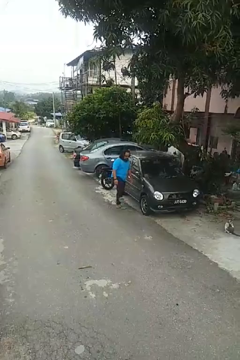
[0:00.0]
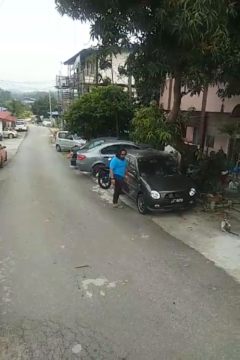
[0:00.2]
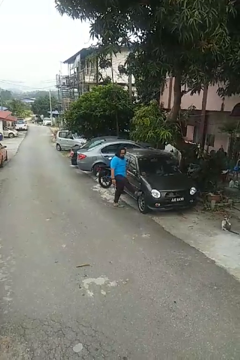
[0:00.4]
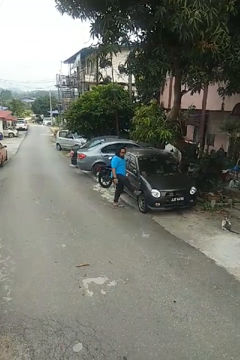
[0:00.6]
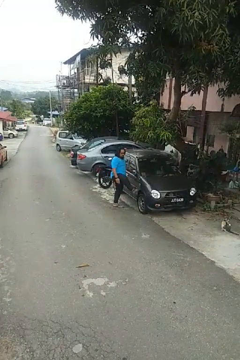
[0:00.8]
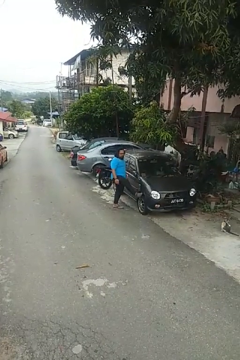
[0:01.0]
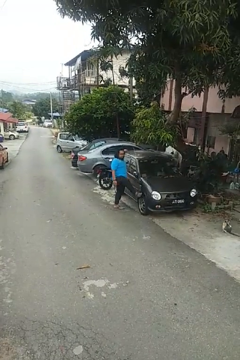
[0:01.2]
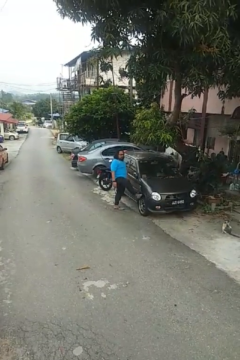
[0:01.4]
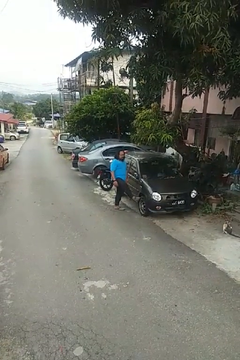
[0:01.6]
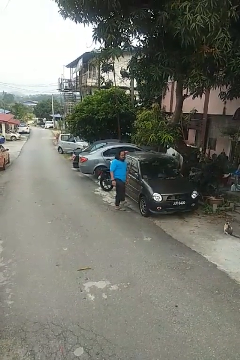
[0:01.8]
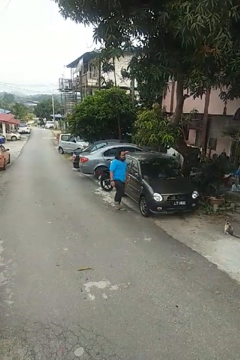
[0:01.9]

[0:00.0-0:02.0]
person kicks car tires

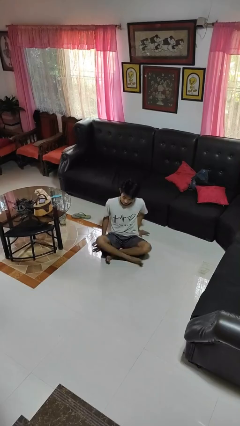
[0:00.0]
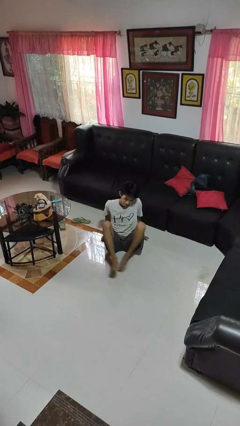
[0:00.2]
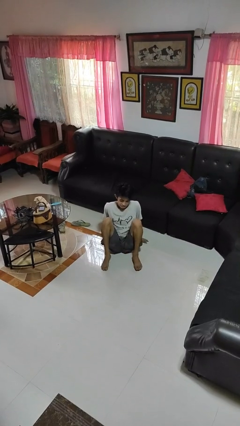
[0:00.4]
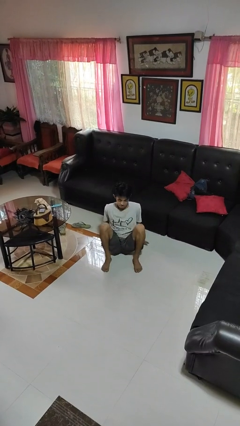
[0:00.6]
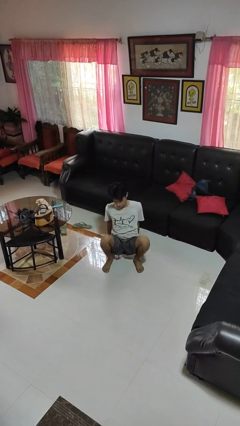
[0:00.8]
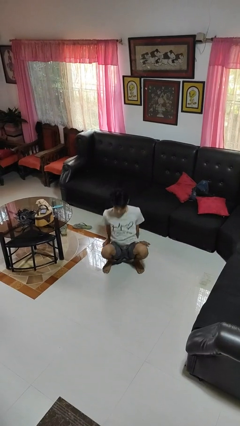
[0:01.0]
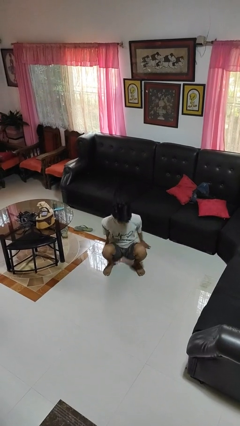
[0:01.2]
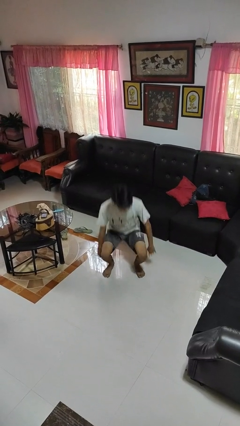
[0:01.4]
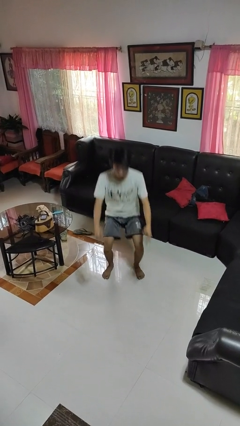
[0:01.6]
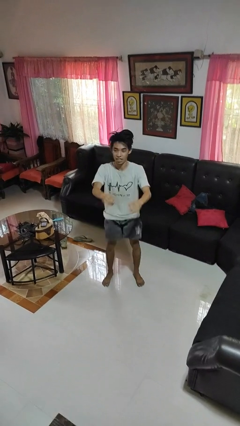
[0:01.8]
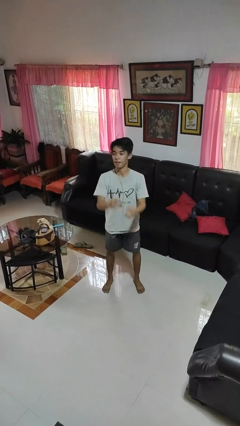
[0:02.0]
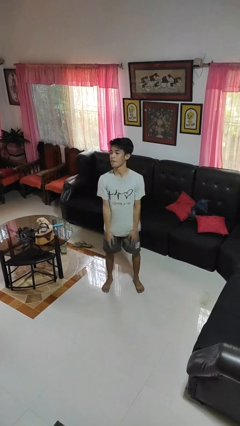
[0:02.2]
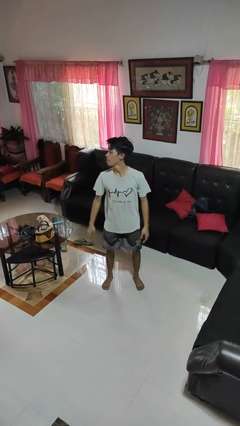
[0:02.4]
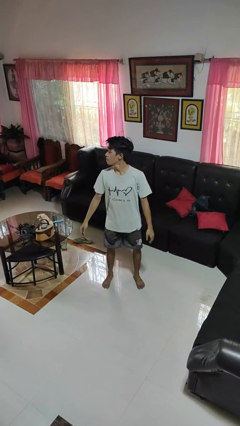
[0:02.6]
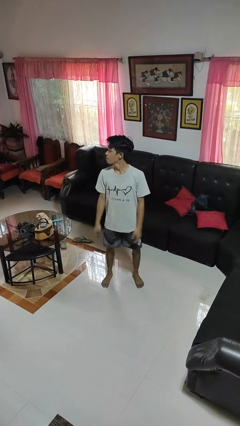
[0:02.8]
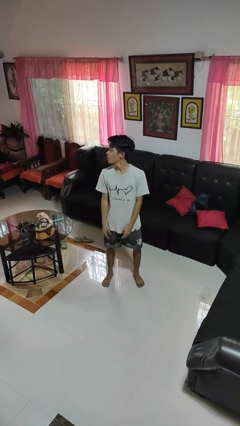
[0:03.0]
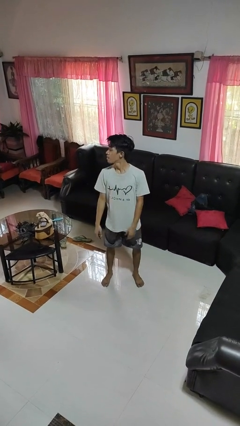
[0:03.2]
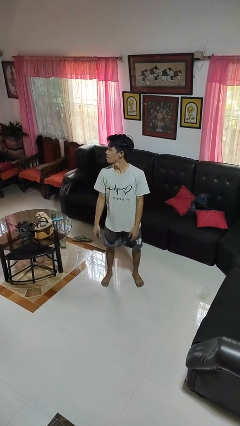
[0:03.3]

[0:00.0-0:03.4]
person stands up from floor

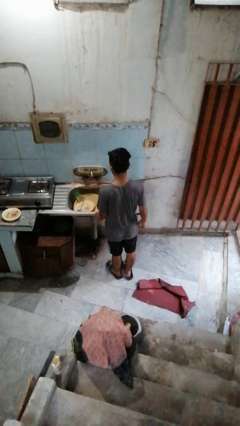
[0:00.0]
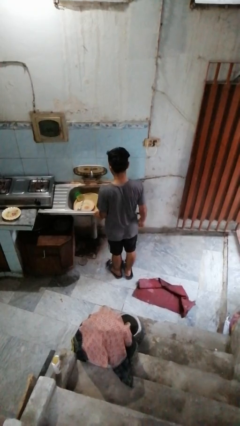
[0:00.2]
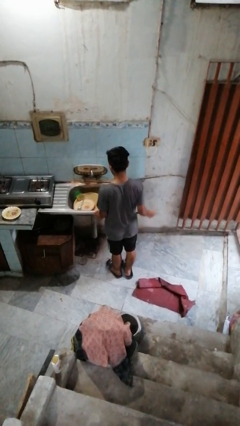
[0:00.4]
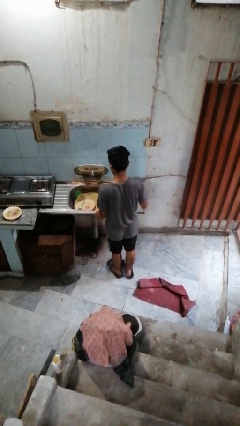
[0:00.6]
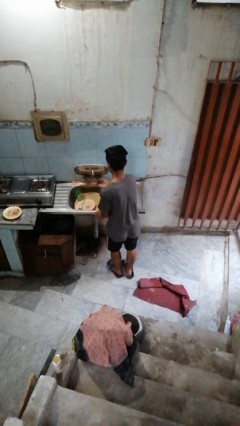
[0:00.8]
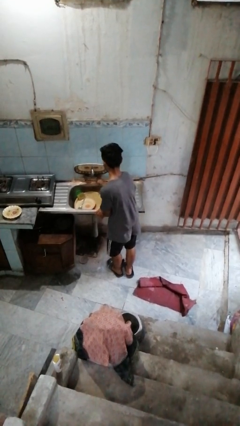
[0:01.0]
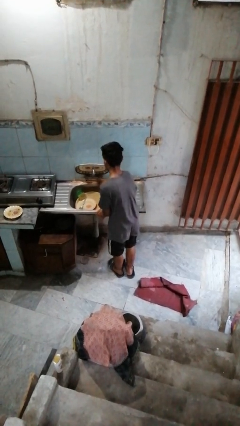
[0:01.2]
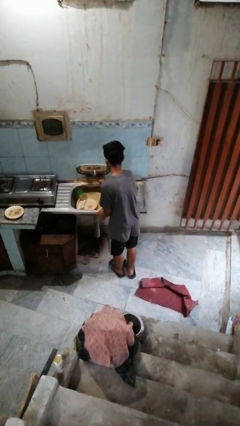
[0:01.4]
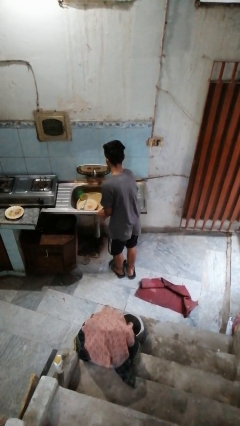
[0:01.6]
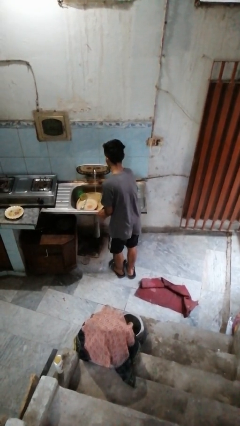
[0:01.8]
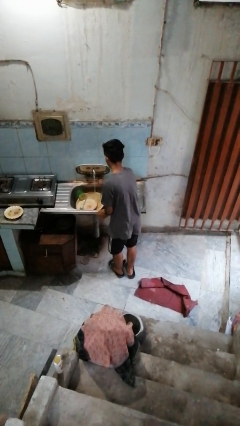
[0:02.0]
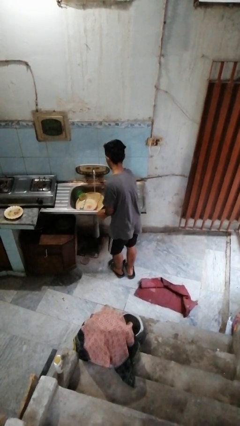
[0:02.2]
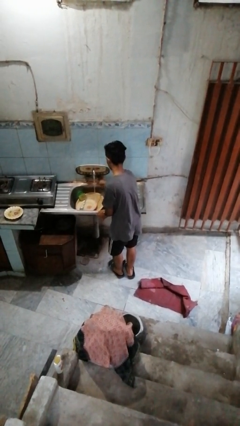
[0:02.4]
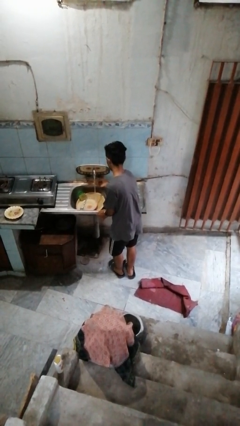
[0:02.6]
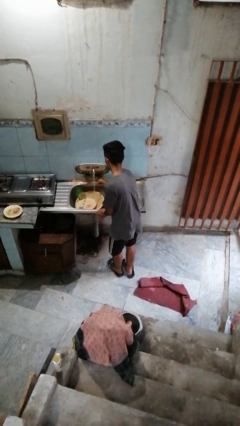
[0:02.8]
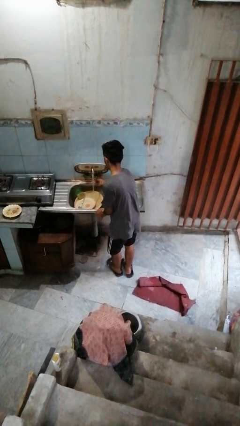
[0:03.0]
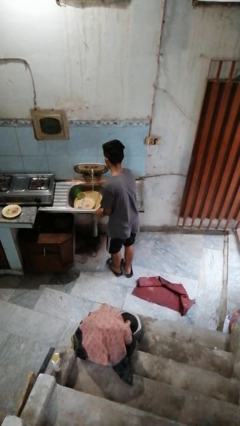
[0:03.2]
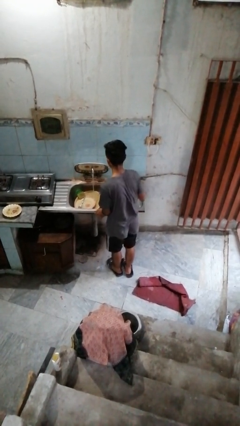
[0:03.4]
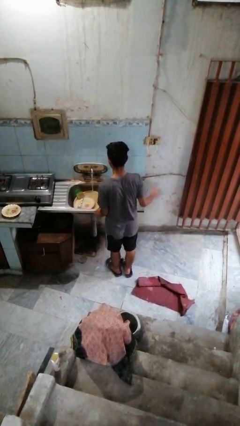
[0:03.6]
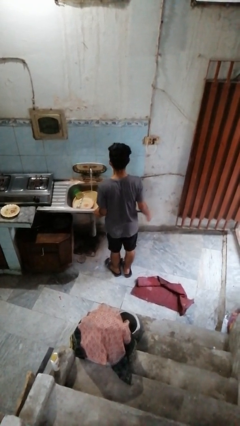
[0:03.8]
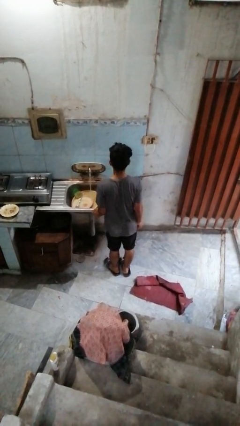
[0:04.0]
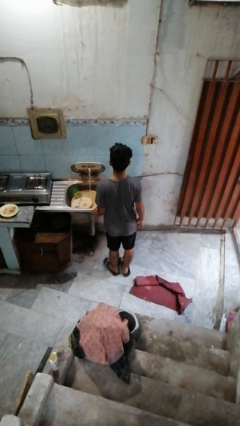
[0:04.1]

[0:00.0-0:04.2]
person turns on faucet

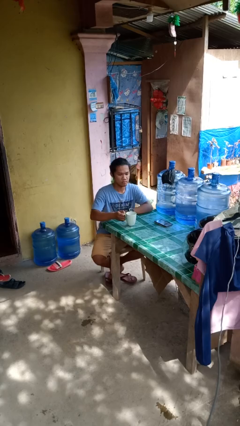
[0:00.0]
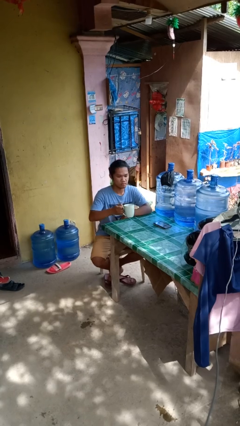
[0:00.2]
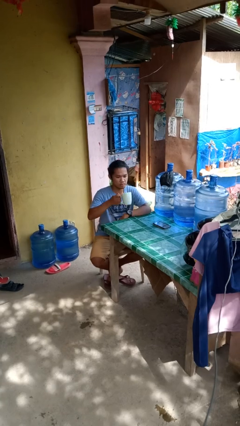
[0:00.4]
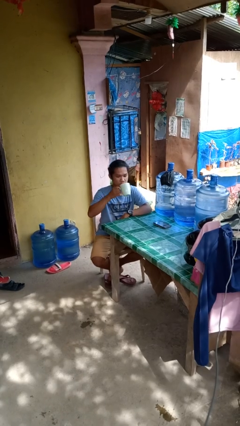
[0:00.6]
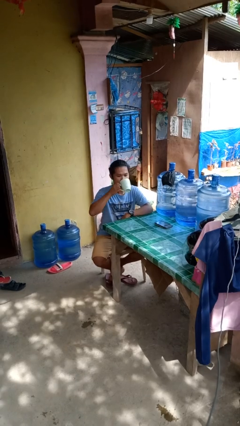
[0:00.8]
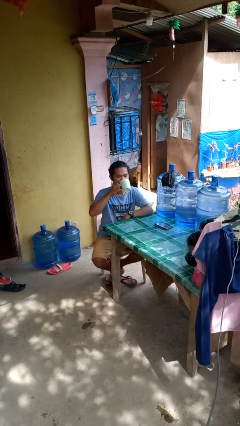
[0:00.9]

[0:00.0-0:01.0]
person picks up object from table

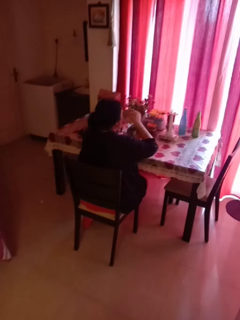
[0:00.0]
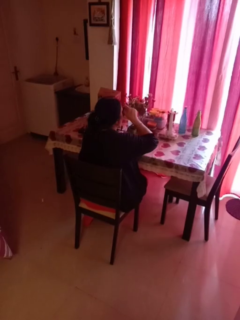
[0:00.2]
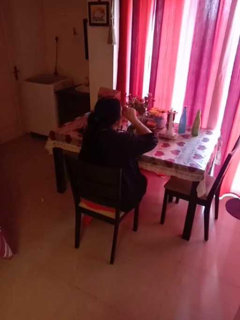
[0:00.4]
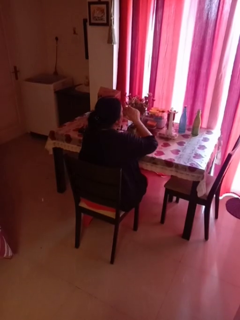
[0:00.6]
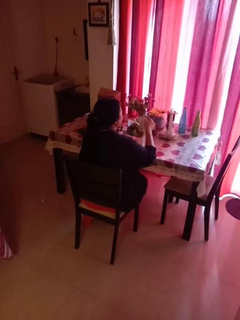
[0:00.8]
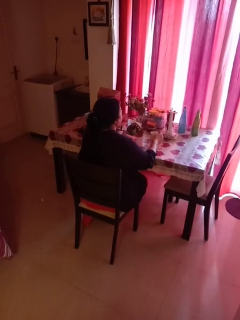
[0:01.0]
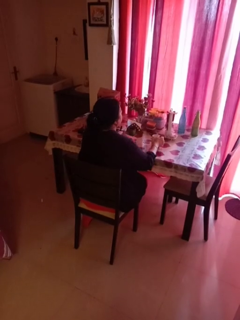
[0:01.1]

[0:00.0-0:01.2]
person drinks from mug

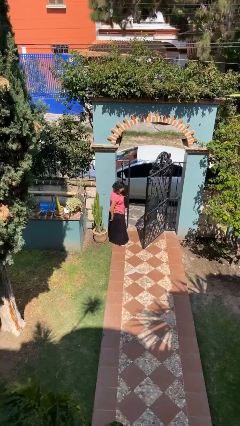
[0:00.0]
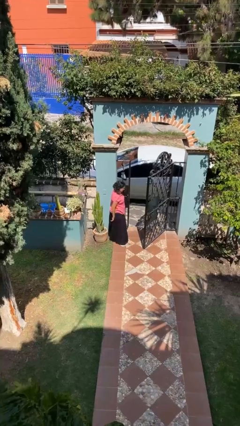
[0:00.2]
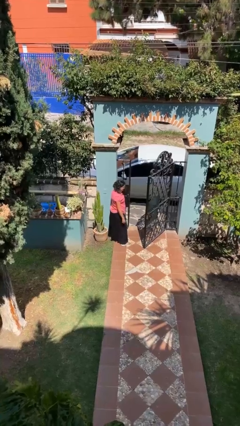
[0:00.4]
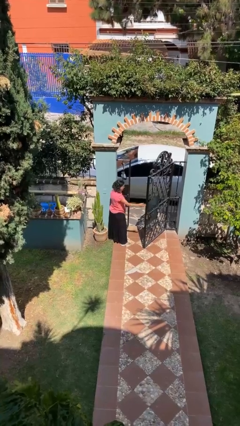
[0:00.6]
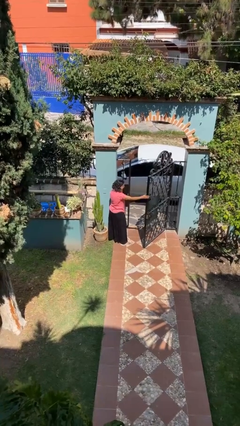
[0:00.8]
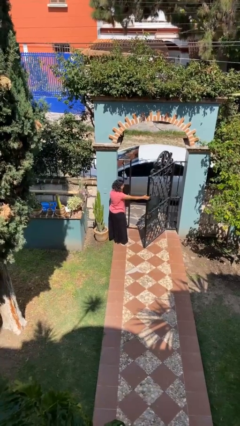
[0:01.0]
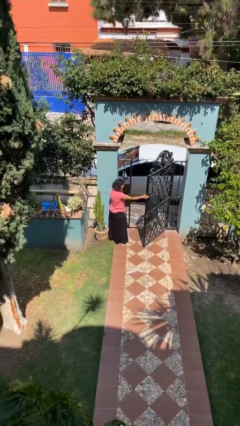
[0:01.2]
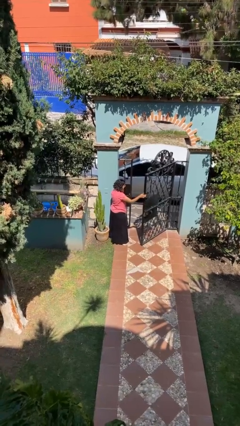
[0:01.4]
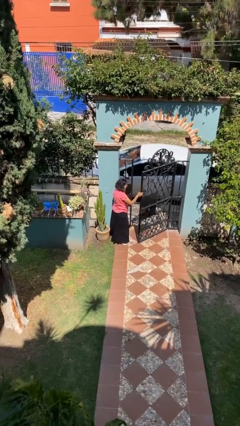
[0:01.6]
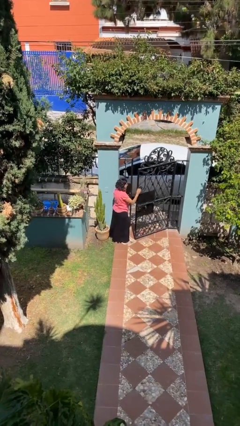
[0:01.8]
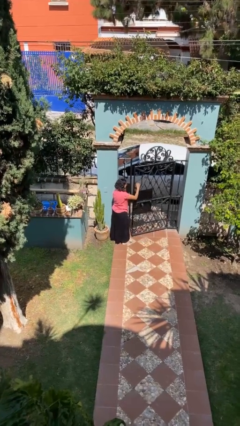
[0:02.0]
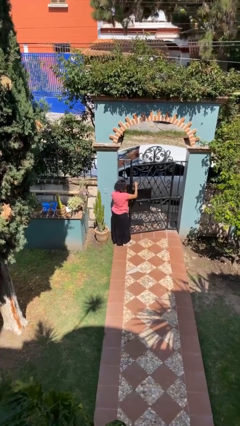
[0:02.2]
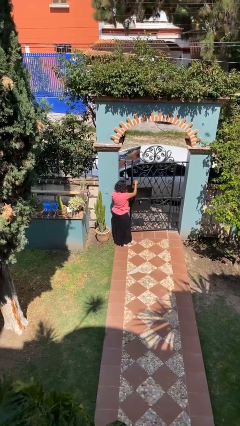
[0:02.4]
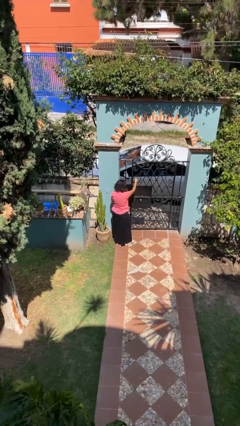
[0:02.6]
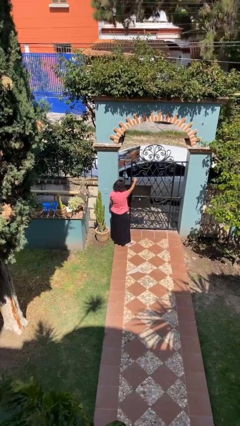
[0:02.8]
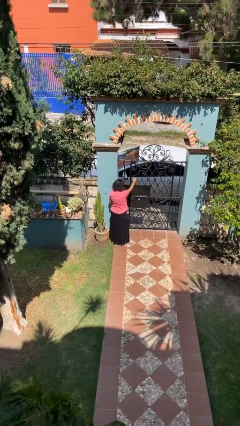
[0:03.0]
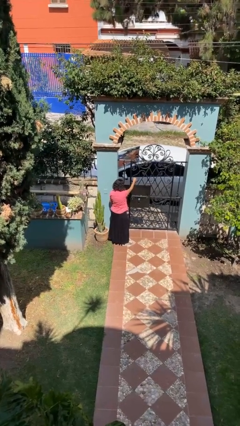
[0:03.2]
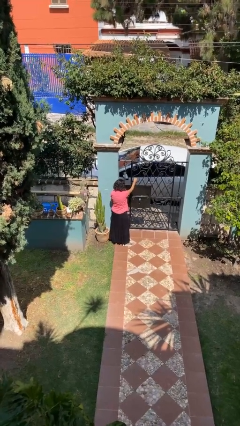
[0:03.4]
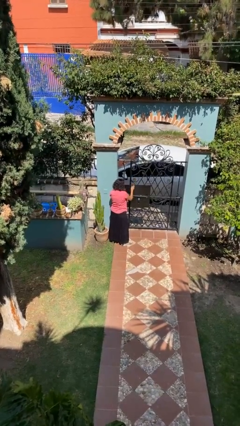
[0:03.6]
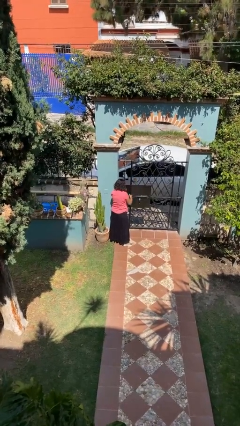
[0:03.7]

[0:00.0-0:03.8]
person closes facility door

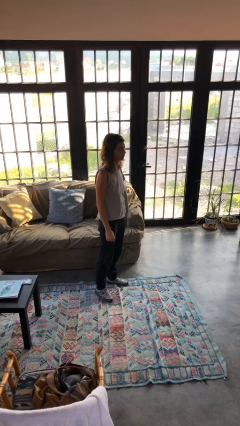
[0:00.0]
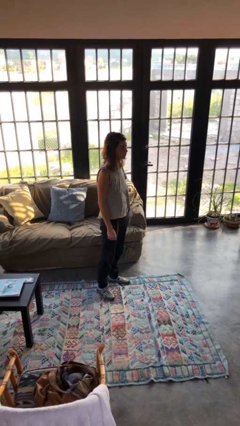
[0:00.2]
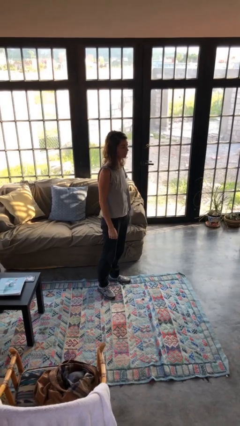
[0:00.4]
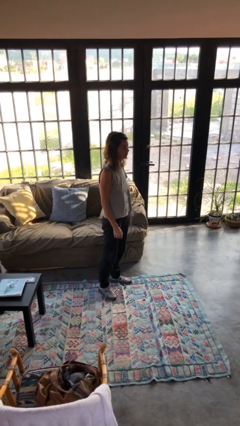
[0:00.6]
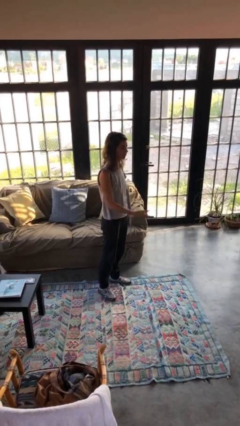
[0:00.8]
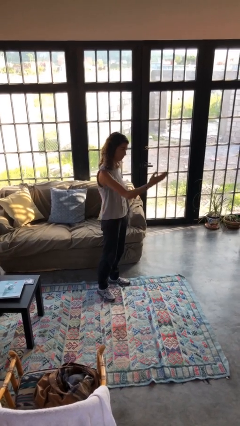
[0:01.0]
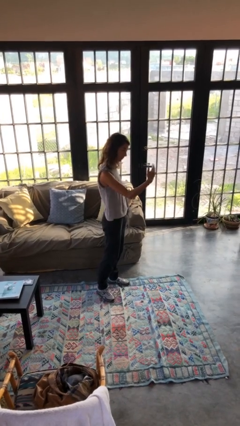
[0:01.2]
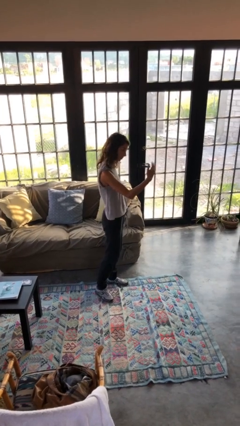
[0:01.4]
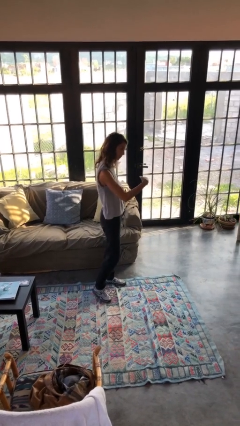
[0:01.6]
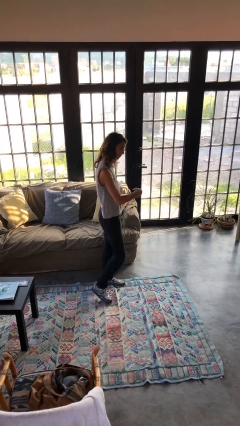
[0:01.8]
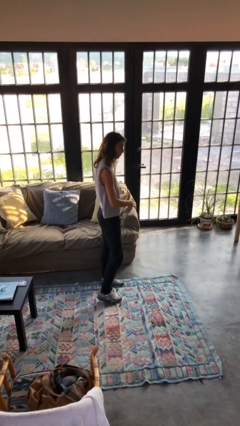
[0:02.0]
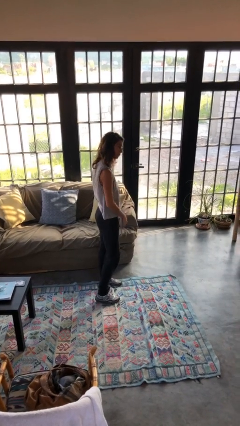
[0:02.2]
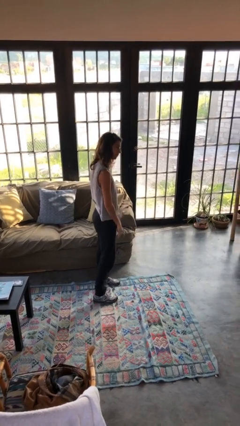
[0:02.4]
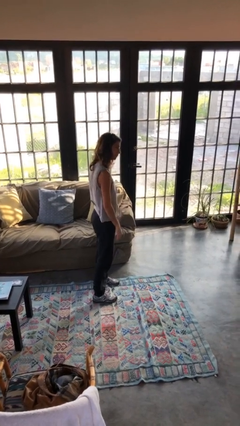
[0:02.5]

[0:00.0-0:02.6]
person gestures come here
